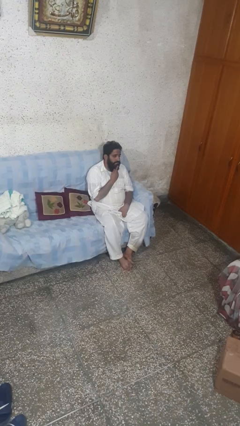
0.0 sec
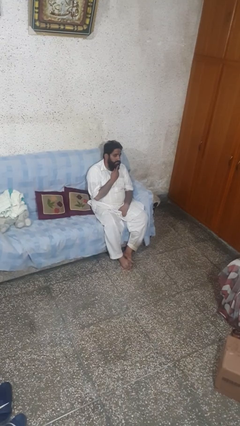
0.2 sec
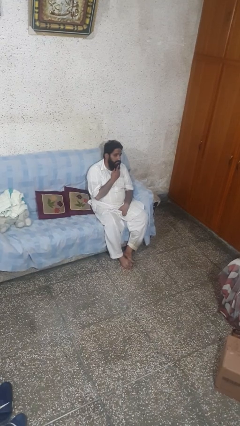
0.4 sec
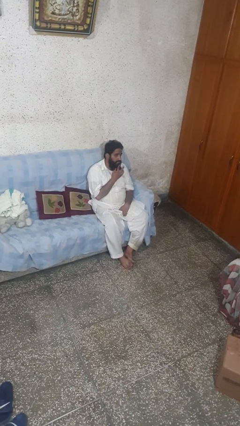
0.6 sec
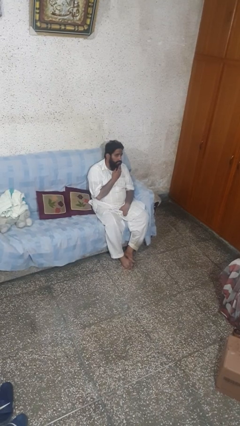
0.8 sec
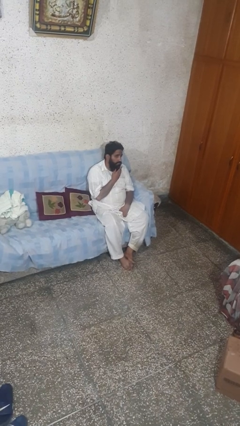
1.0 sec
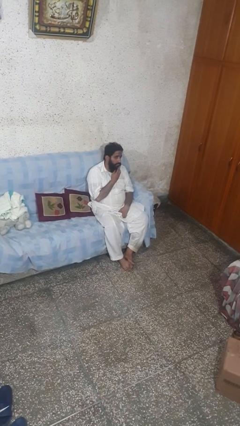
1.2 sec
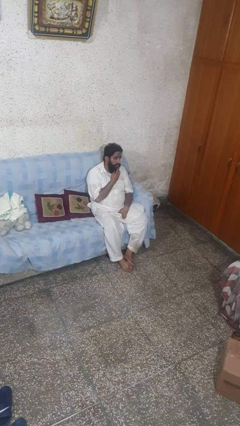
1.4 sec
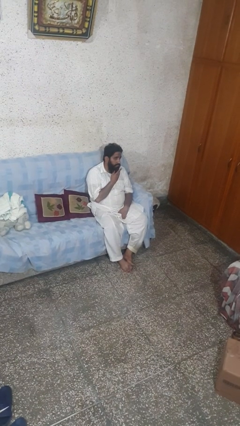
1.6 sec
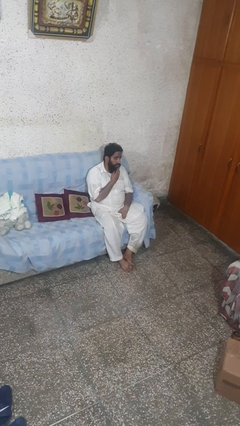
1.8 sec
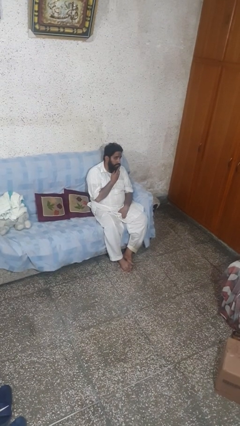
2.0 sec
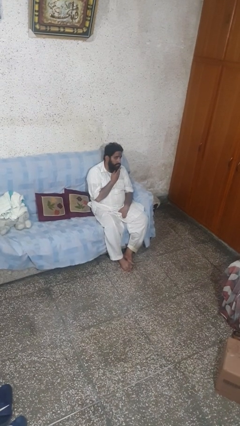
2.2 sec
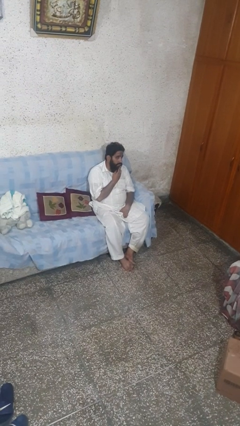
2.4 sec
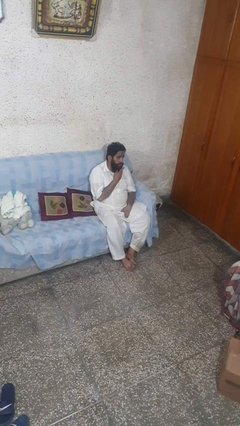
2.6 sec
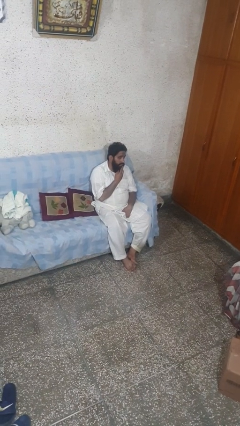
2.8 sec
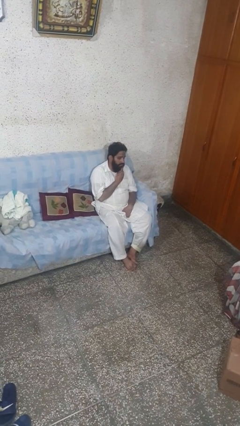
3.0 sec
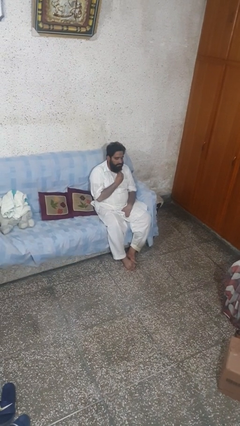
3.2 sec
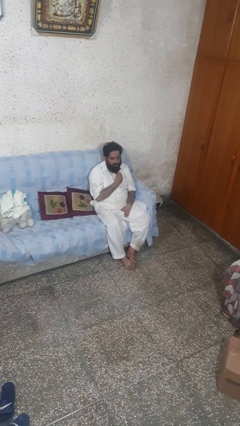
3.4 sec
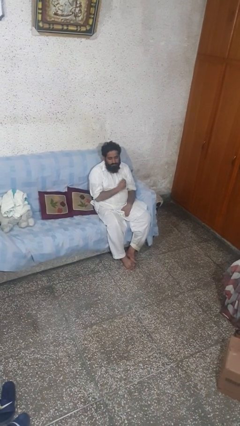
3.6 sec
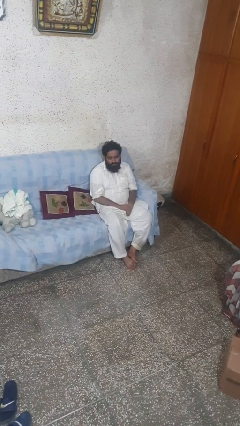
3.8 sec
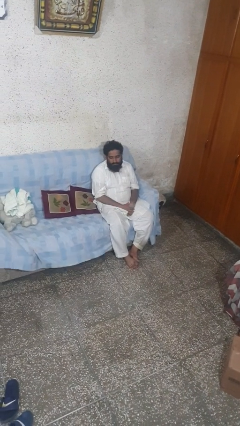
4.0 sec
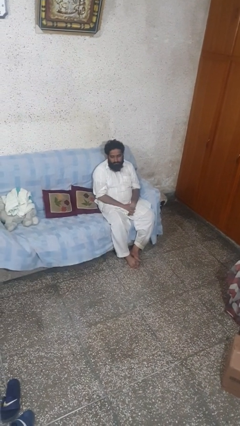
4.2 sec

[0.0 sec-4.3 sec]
person strokes chin

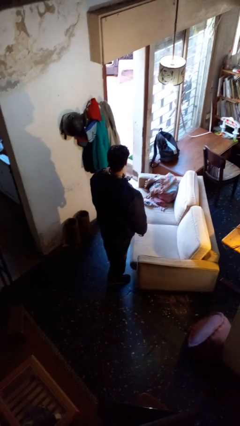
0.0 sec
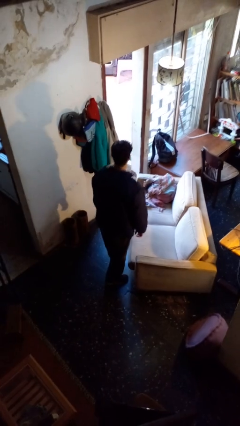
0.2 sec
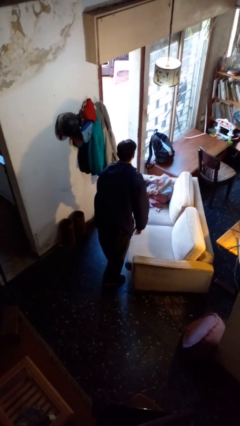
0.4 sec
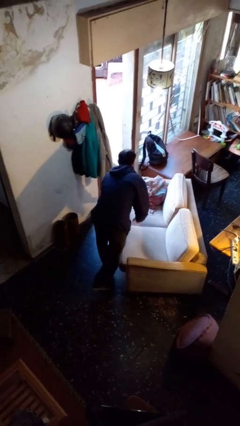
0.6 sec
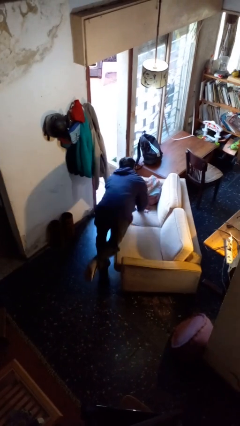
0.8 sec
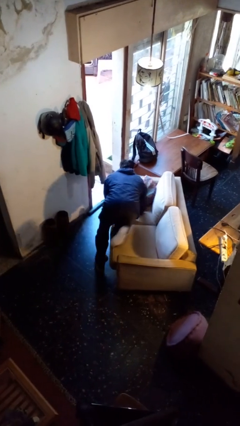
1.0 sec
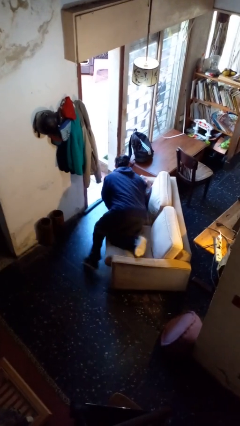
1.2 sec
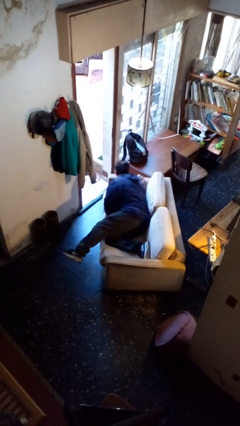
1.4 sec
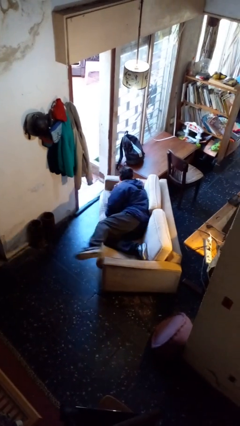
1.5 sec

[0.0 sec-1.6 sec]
person lies down on couch

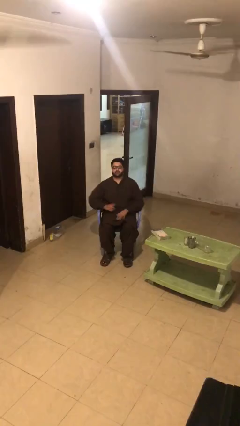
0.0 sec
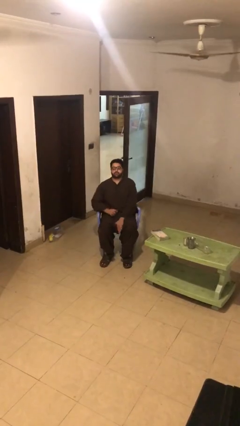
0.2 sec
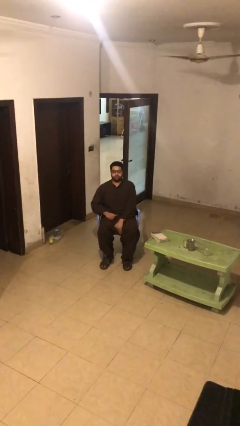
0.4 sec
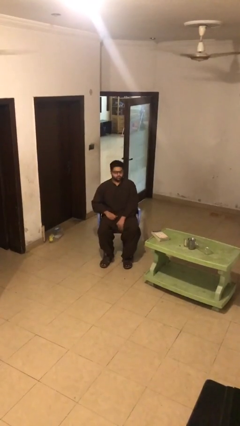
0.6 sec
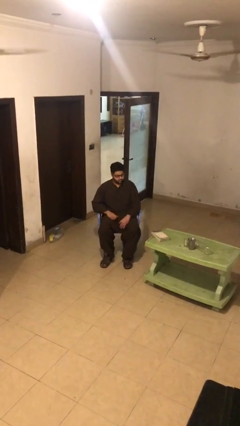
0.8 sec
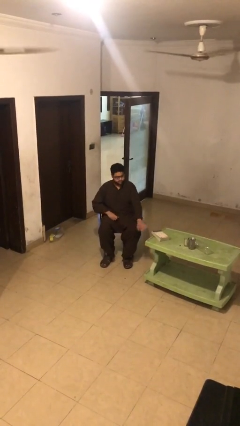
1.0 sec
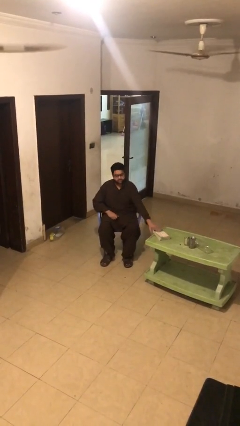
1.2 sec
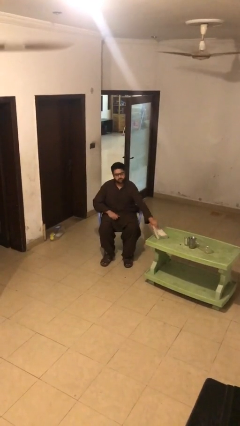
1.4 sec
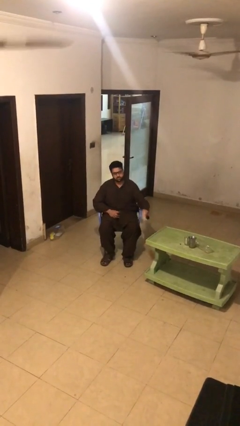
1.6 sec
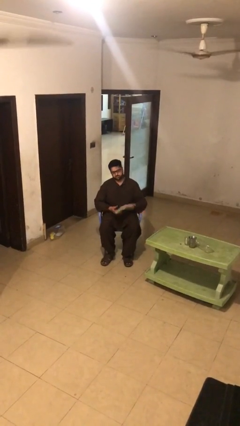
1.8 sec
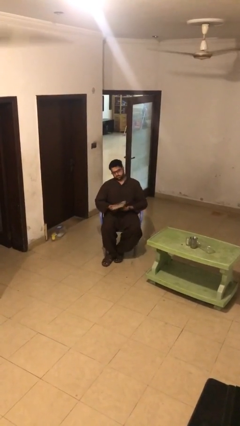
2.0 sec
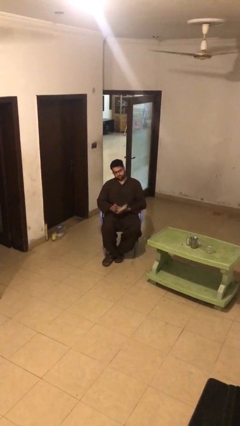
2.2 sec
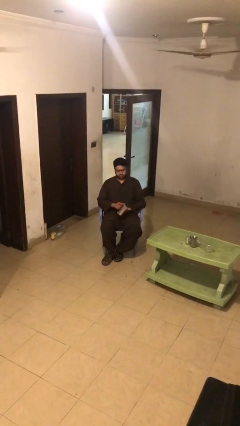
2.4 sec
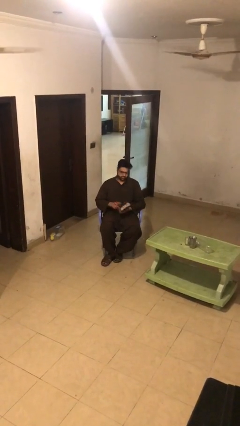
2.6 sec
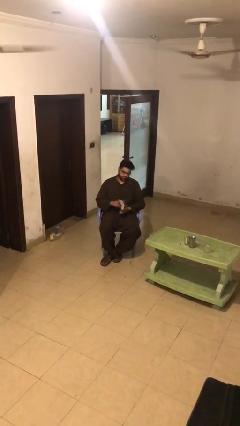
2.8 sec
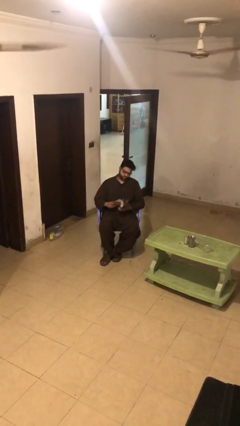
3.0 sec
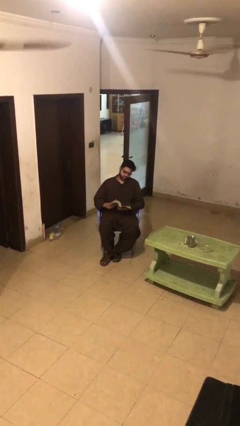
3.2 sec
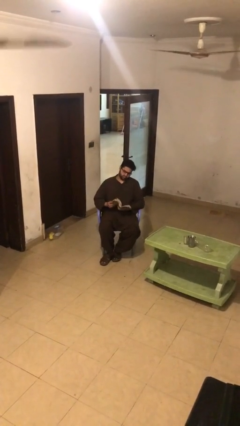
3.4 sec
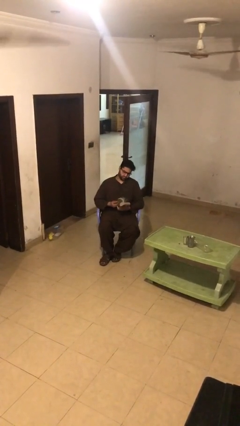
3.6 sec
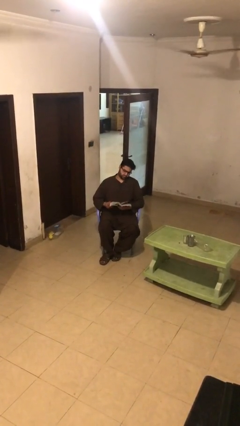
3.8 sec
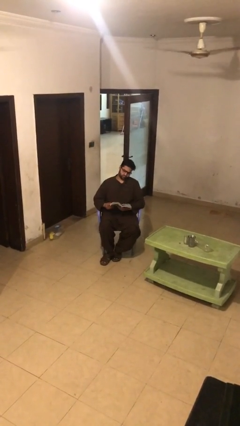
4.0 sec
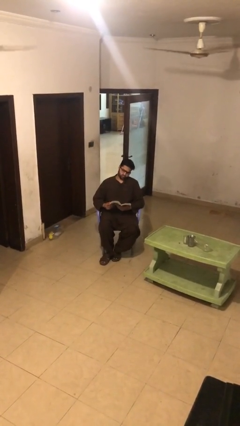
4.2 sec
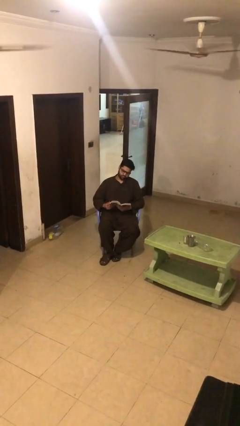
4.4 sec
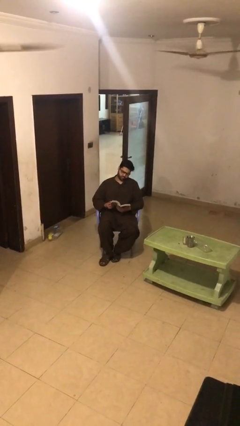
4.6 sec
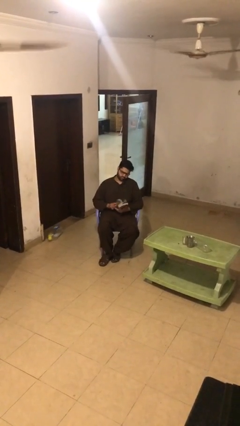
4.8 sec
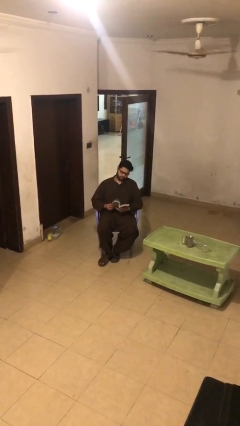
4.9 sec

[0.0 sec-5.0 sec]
person reads document

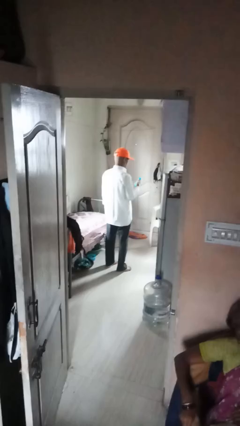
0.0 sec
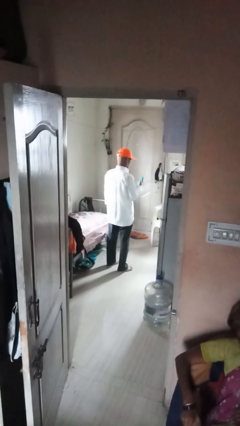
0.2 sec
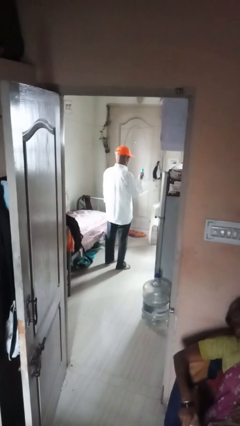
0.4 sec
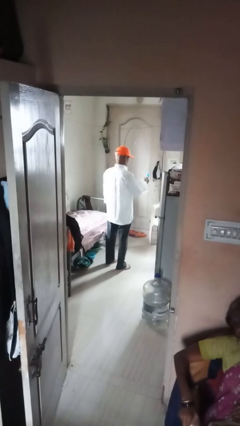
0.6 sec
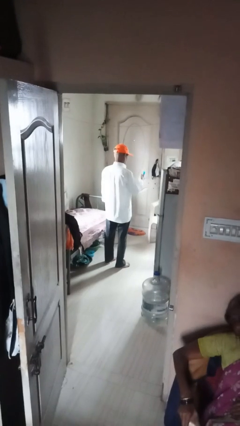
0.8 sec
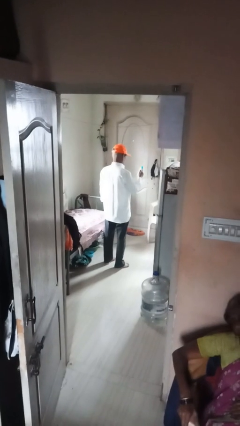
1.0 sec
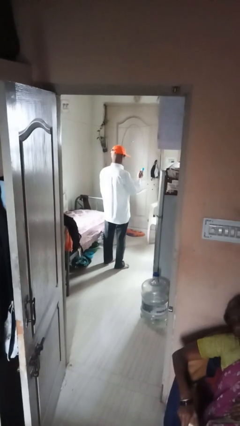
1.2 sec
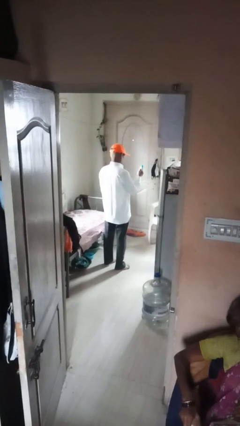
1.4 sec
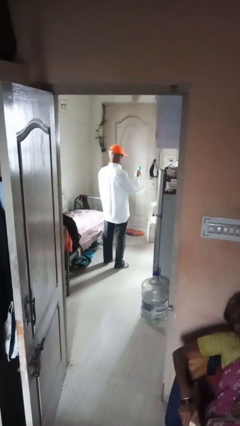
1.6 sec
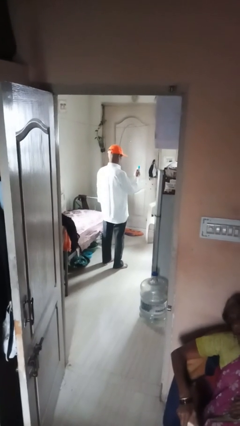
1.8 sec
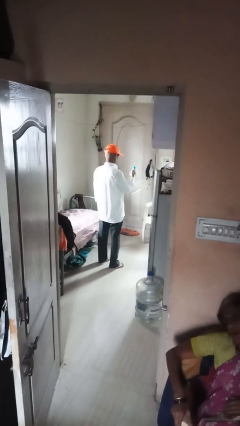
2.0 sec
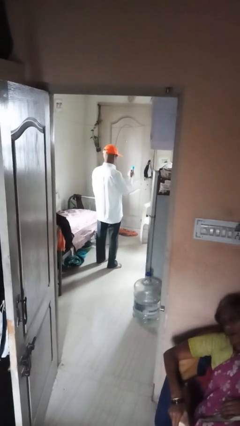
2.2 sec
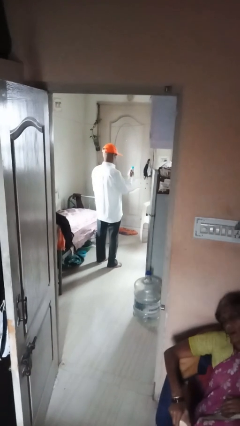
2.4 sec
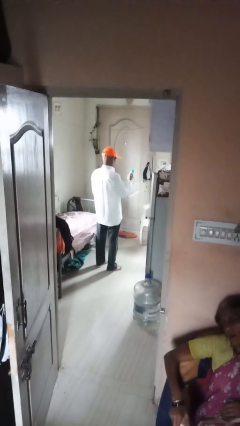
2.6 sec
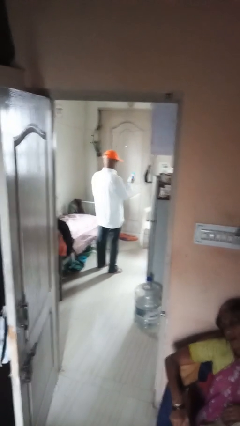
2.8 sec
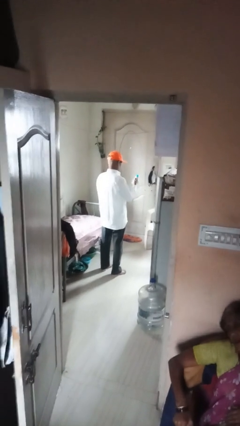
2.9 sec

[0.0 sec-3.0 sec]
person squeezes object

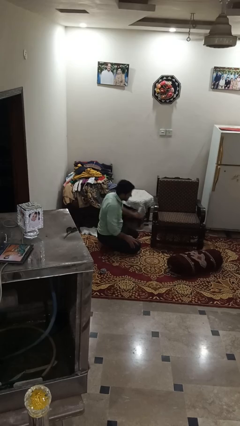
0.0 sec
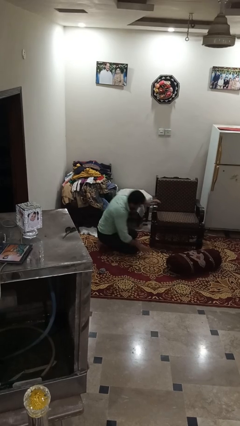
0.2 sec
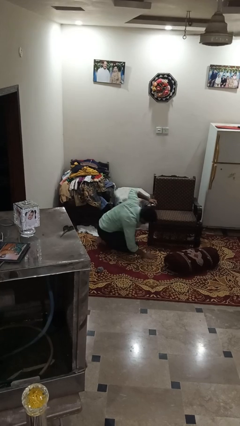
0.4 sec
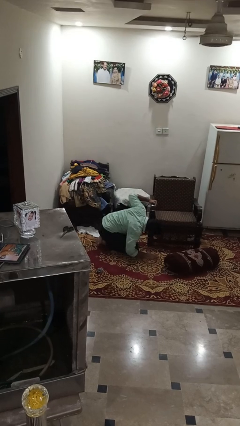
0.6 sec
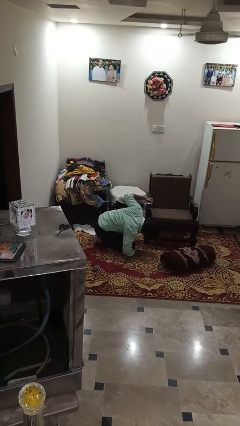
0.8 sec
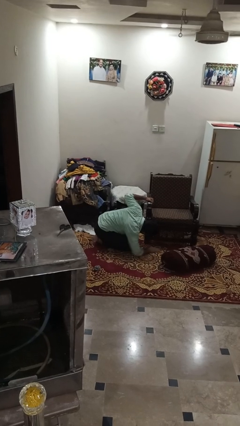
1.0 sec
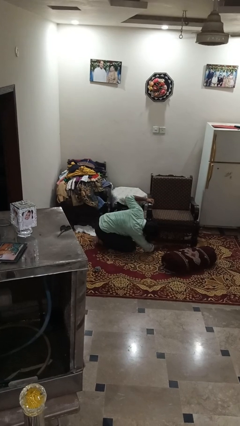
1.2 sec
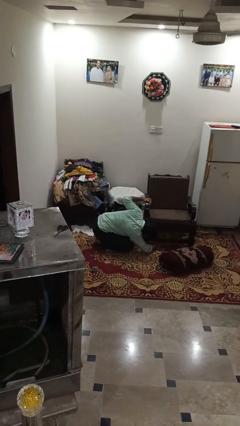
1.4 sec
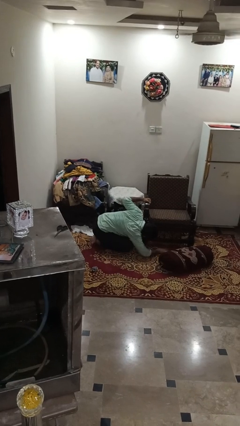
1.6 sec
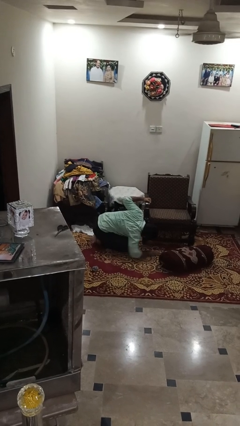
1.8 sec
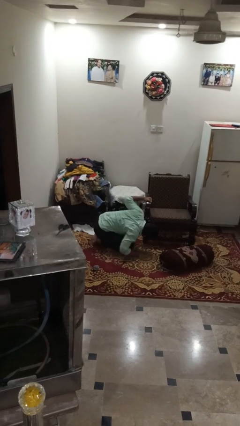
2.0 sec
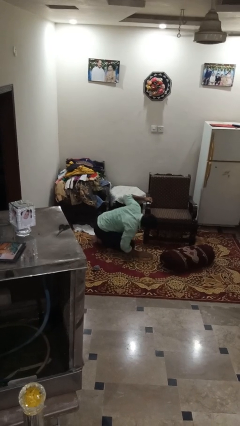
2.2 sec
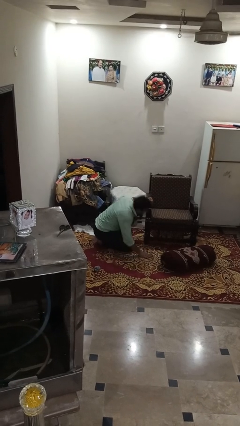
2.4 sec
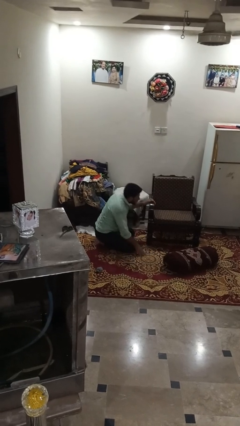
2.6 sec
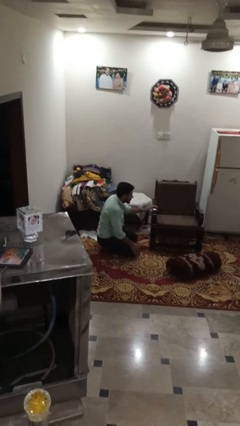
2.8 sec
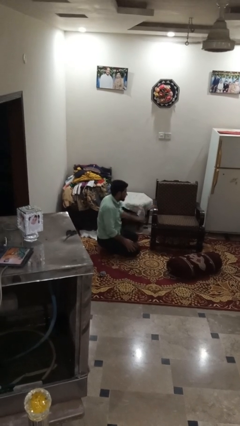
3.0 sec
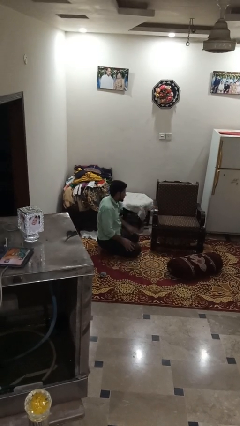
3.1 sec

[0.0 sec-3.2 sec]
person searches in couch

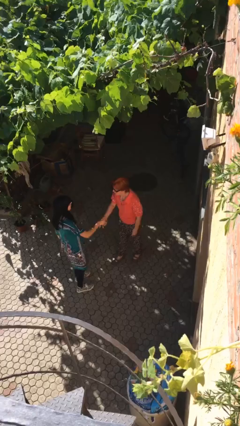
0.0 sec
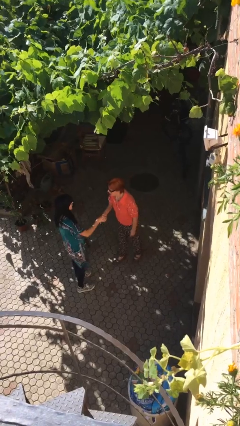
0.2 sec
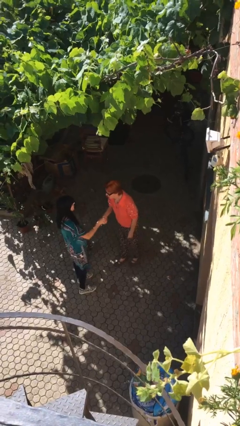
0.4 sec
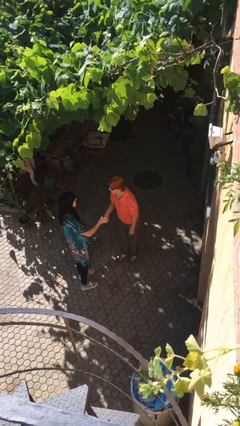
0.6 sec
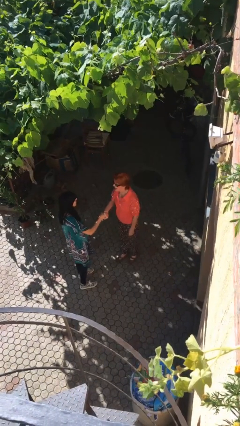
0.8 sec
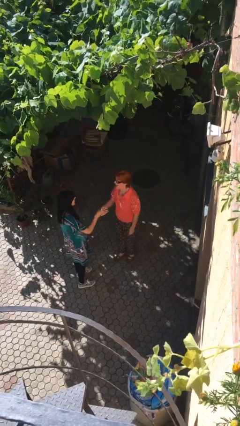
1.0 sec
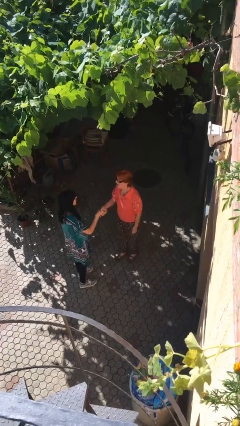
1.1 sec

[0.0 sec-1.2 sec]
person shakes hand
